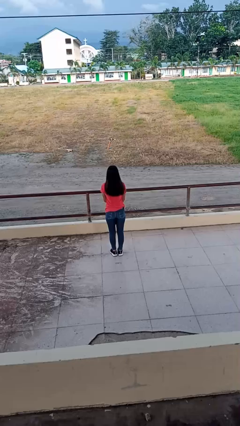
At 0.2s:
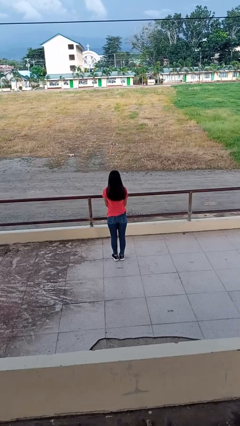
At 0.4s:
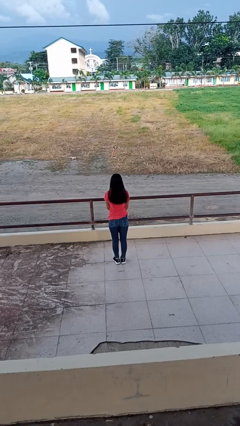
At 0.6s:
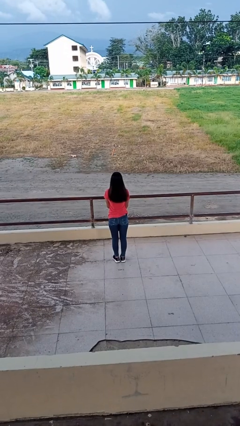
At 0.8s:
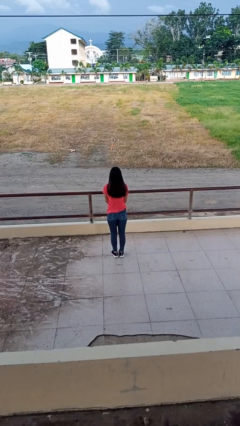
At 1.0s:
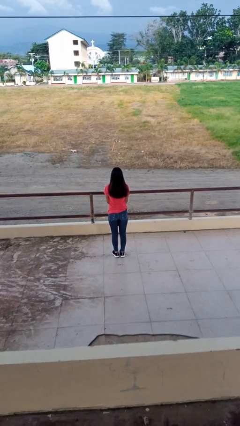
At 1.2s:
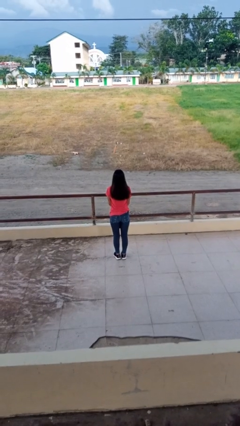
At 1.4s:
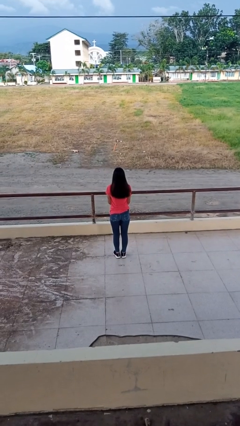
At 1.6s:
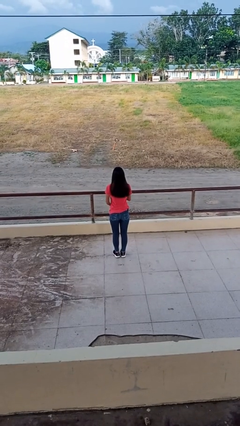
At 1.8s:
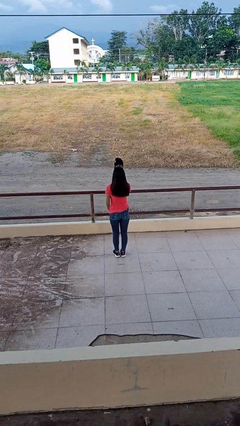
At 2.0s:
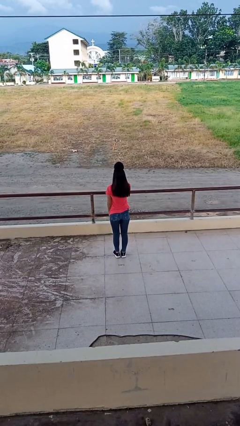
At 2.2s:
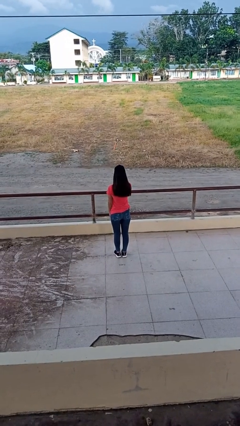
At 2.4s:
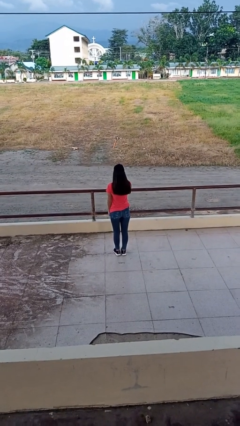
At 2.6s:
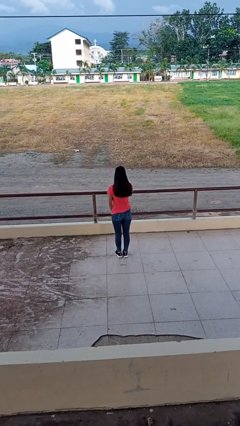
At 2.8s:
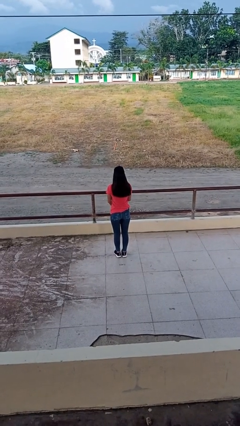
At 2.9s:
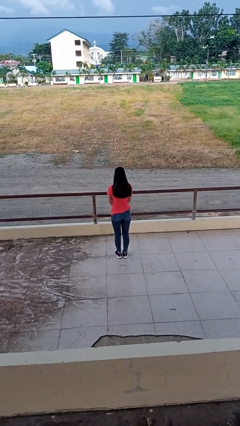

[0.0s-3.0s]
person puts on hat

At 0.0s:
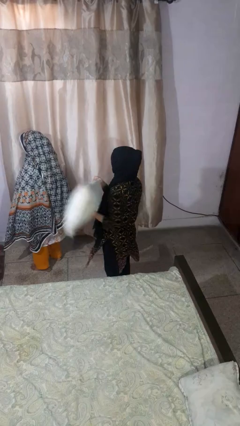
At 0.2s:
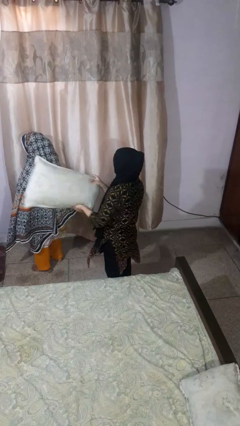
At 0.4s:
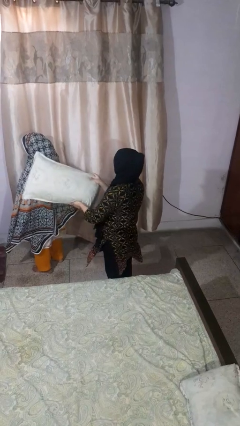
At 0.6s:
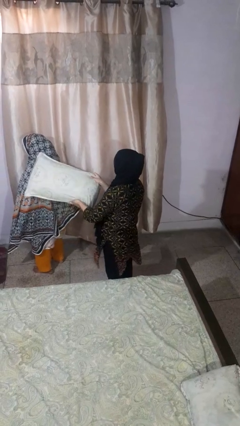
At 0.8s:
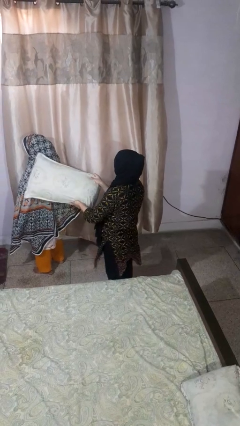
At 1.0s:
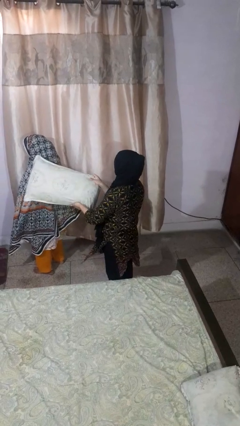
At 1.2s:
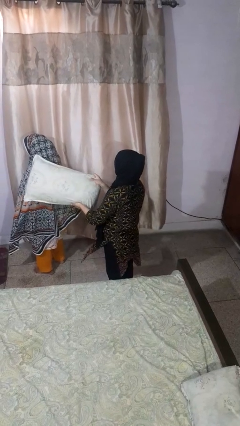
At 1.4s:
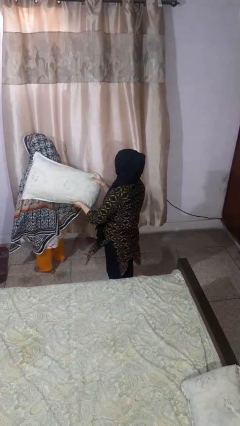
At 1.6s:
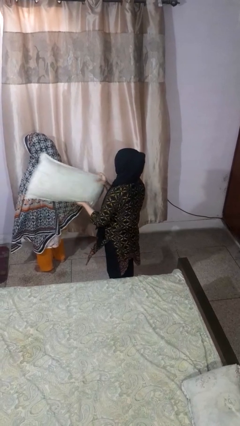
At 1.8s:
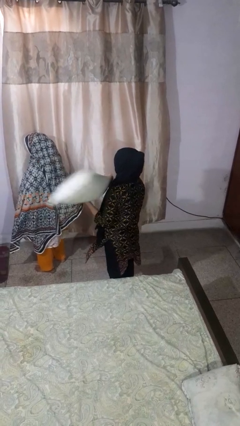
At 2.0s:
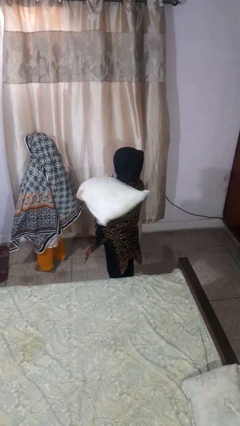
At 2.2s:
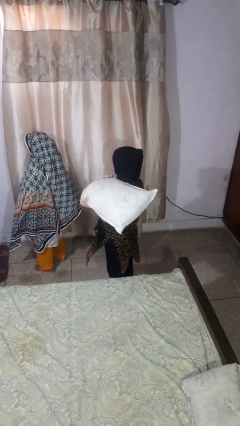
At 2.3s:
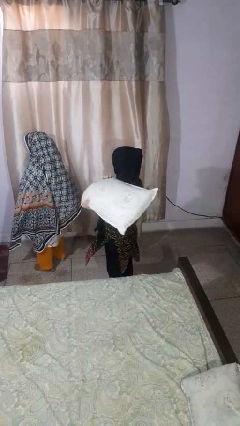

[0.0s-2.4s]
person hits person with pillow

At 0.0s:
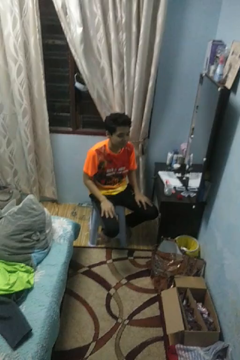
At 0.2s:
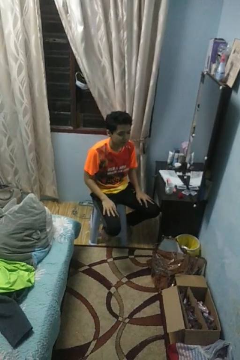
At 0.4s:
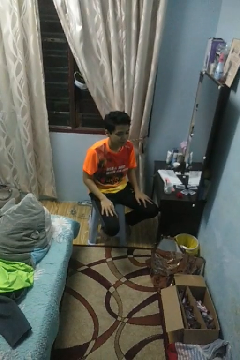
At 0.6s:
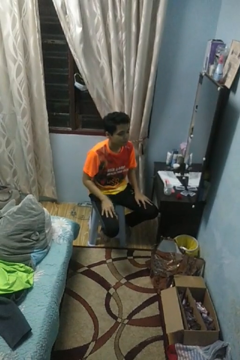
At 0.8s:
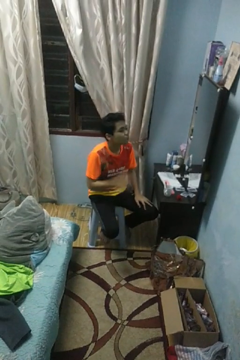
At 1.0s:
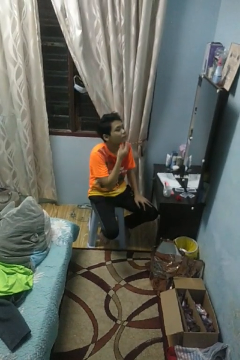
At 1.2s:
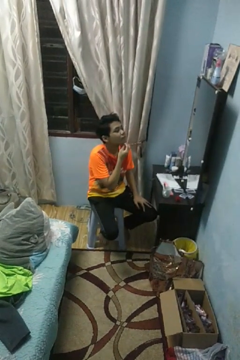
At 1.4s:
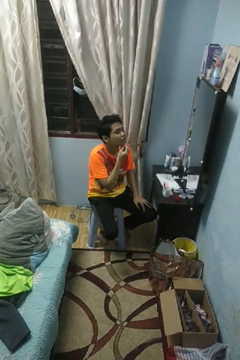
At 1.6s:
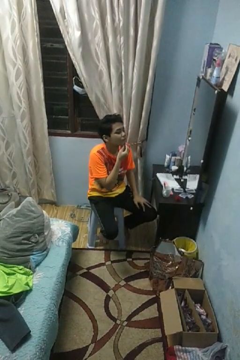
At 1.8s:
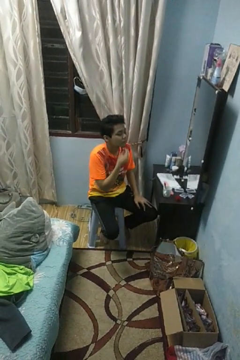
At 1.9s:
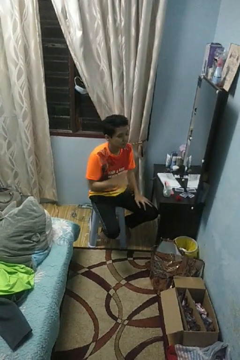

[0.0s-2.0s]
person strokes chin

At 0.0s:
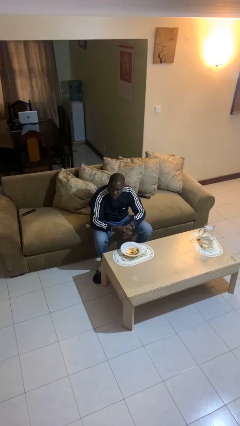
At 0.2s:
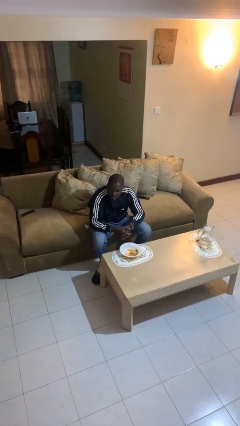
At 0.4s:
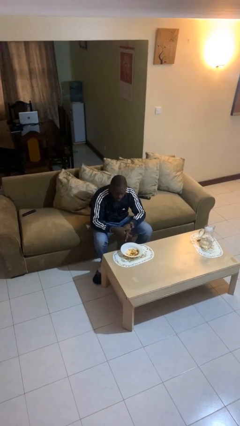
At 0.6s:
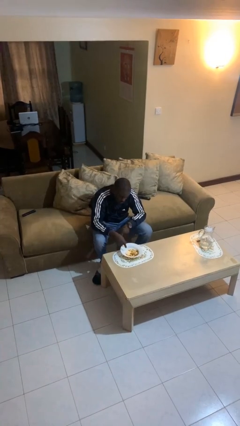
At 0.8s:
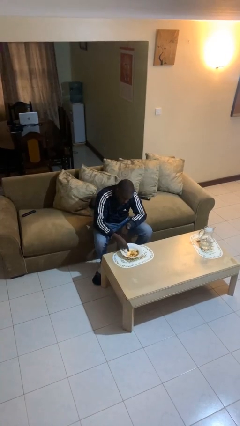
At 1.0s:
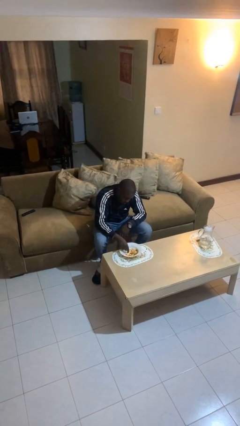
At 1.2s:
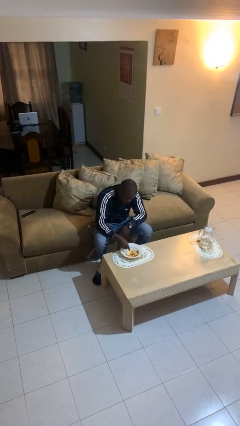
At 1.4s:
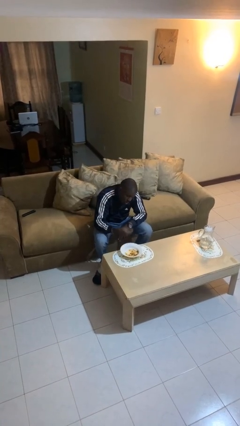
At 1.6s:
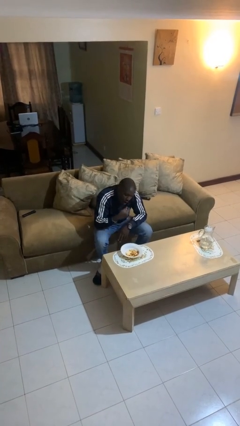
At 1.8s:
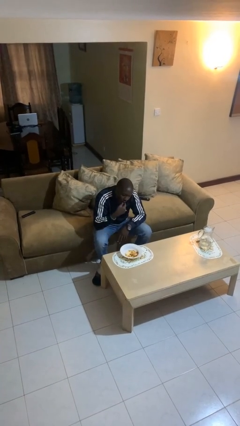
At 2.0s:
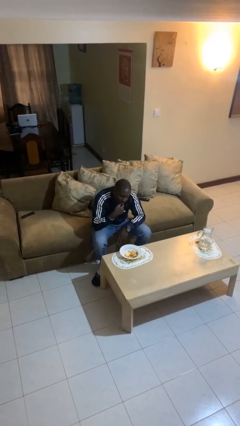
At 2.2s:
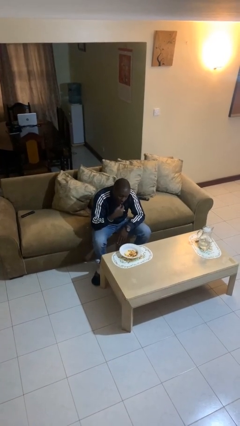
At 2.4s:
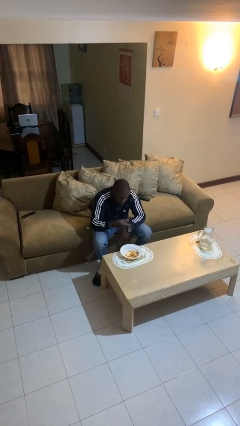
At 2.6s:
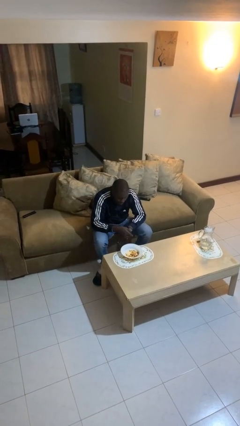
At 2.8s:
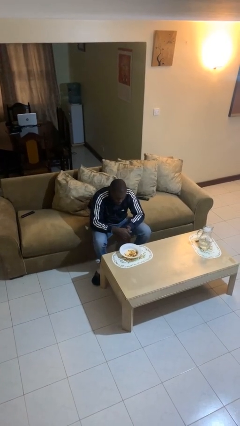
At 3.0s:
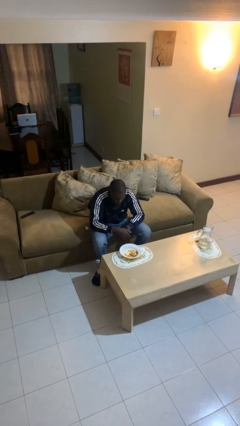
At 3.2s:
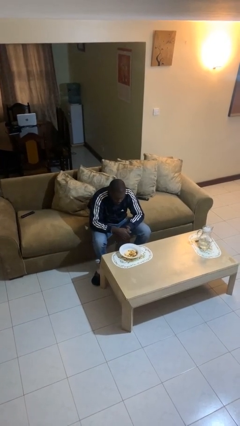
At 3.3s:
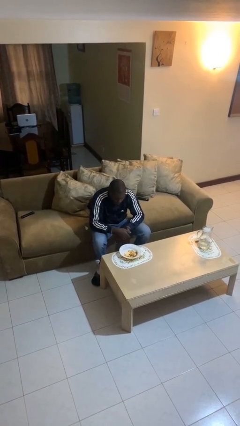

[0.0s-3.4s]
person eats with hands

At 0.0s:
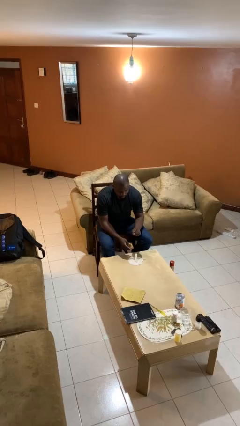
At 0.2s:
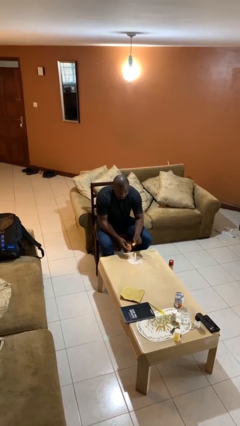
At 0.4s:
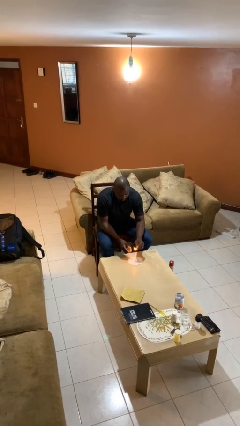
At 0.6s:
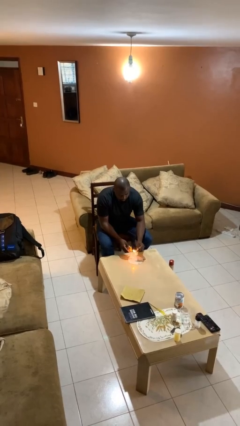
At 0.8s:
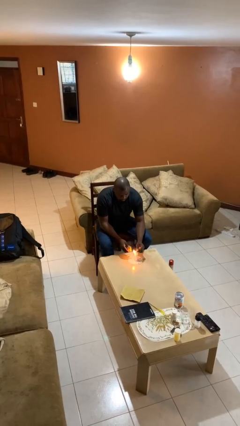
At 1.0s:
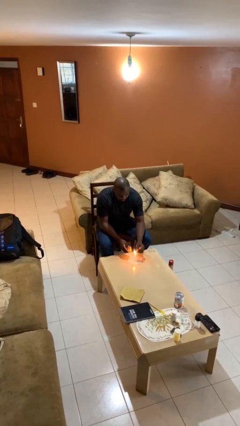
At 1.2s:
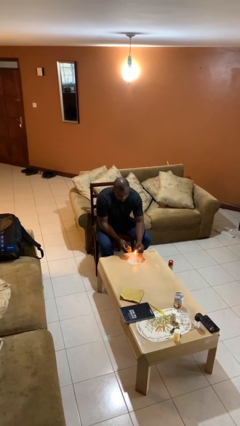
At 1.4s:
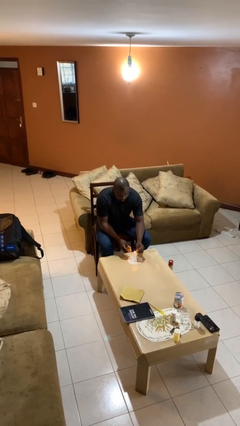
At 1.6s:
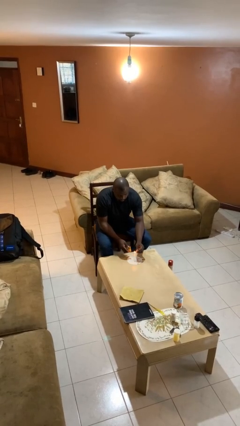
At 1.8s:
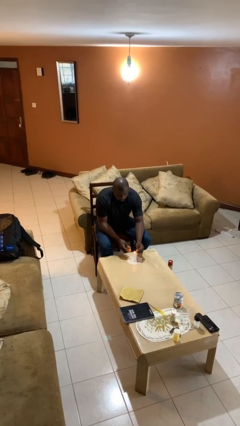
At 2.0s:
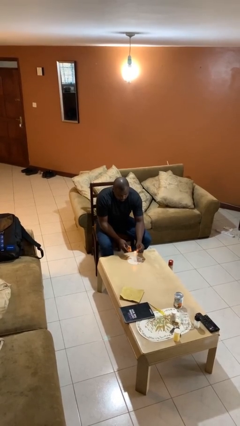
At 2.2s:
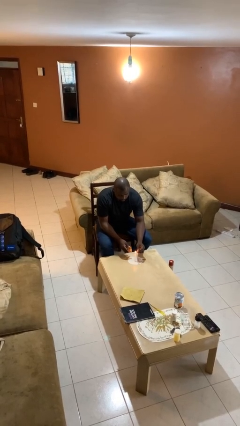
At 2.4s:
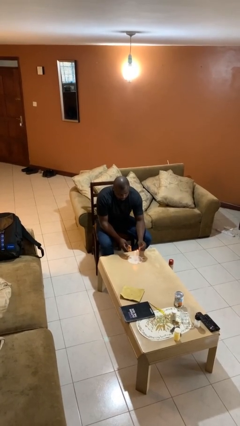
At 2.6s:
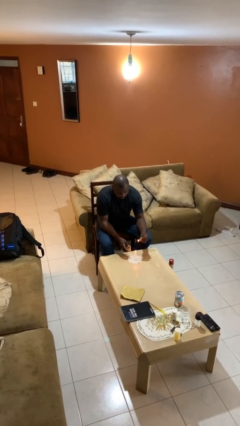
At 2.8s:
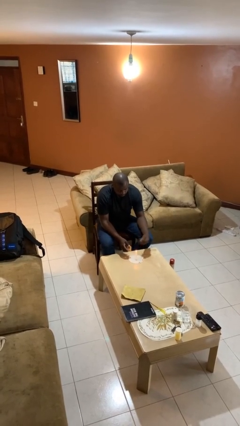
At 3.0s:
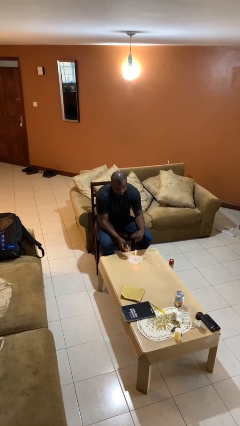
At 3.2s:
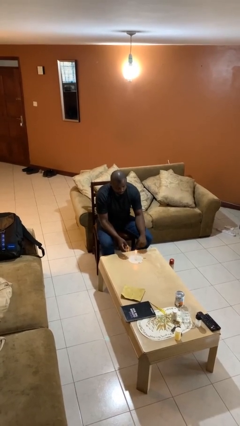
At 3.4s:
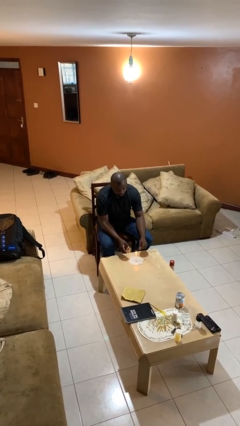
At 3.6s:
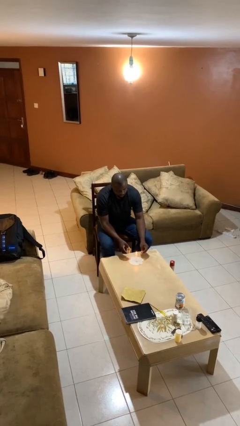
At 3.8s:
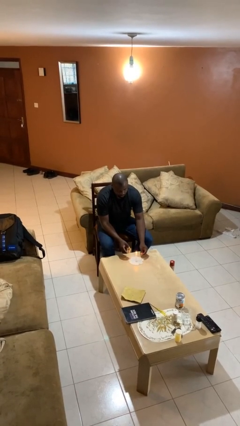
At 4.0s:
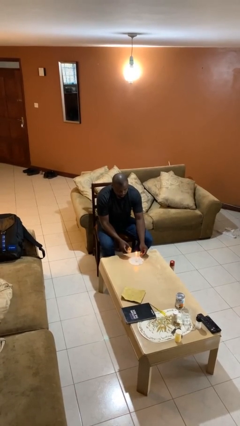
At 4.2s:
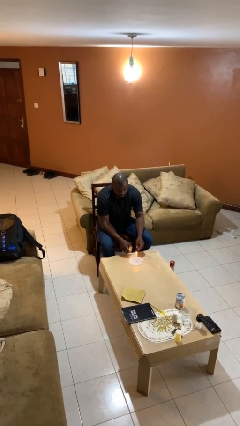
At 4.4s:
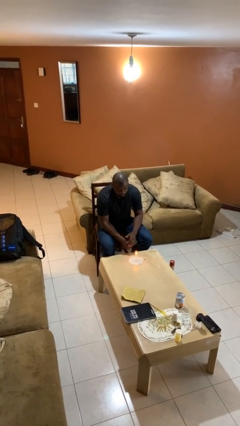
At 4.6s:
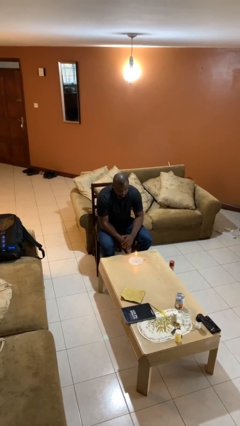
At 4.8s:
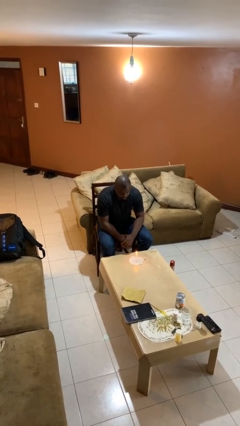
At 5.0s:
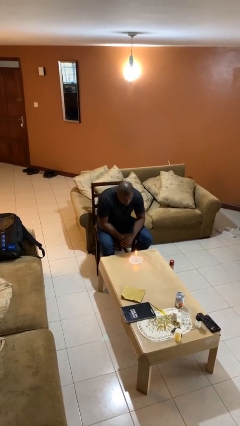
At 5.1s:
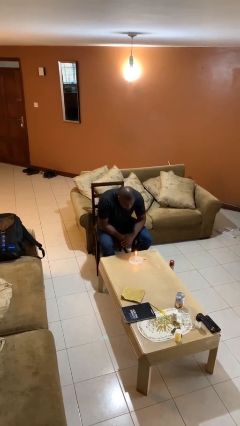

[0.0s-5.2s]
person lights candle

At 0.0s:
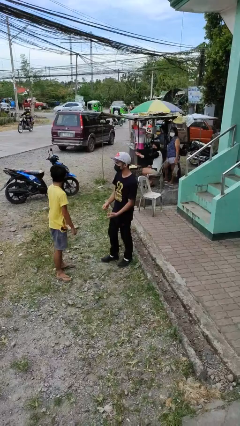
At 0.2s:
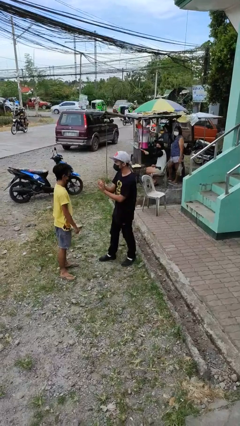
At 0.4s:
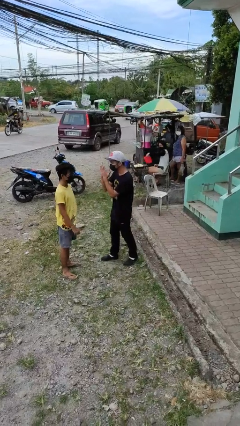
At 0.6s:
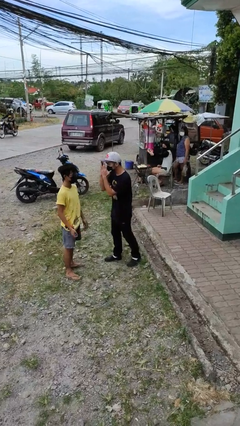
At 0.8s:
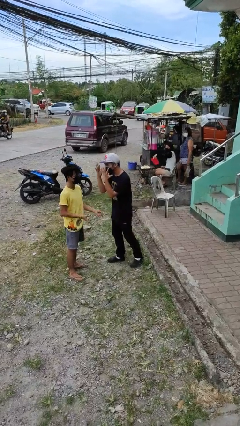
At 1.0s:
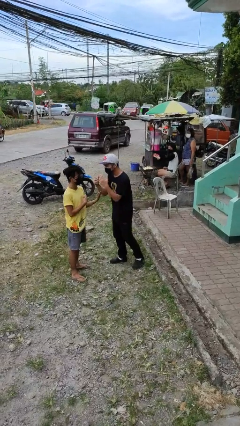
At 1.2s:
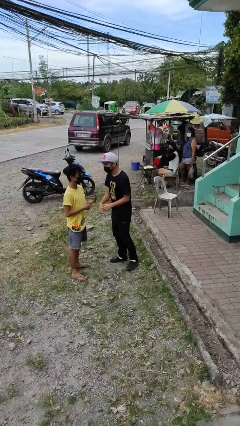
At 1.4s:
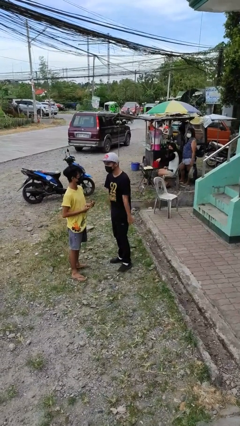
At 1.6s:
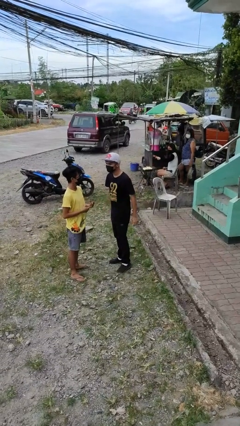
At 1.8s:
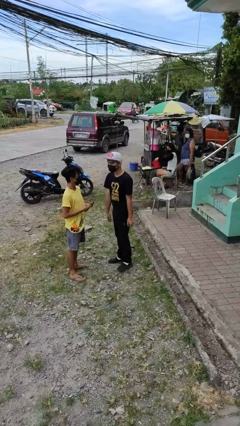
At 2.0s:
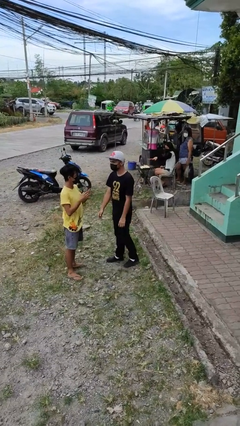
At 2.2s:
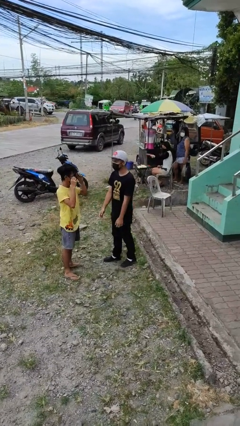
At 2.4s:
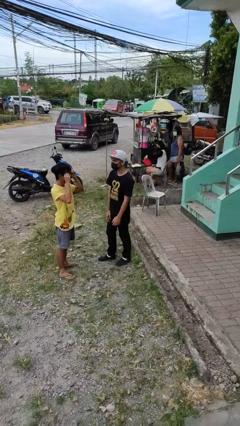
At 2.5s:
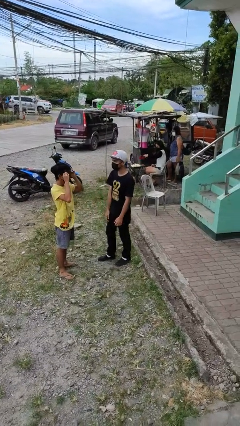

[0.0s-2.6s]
person talks to person
